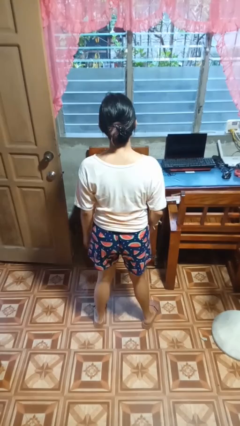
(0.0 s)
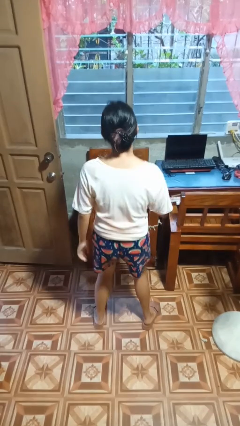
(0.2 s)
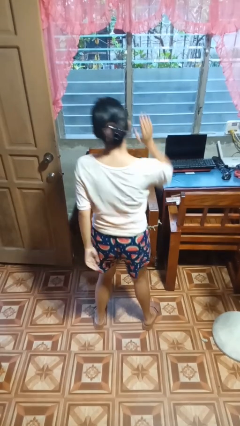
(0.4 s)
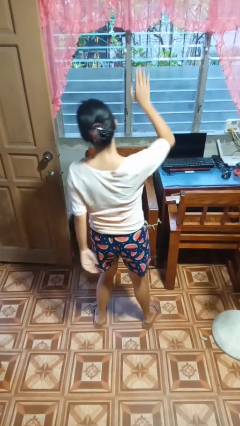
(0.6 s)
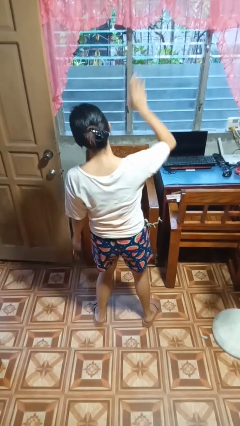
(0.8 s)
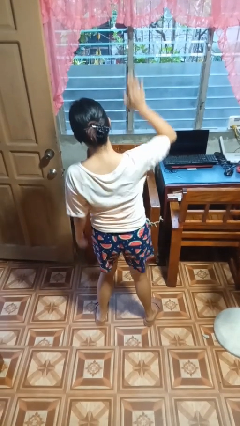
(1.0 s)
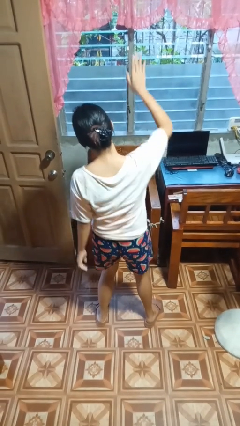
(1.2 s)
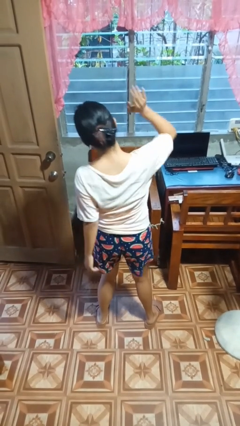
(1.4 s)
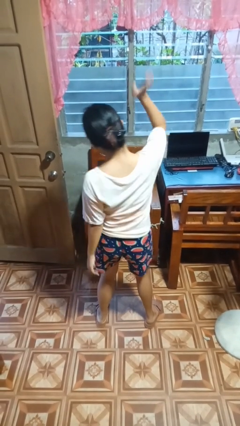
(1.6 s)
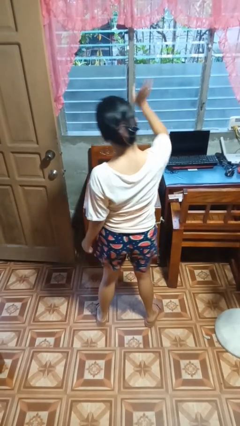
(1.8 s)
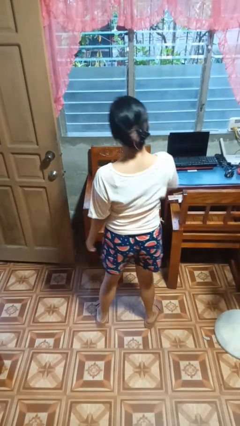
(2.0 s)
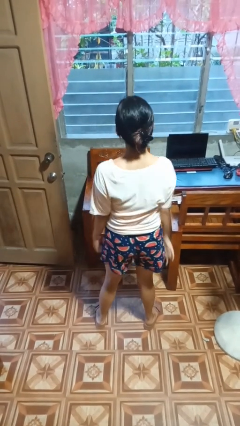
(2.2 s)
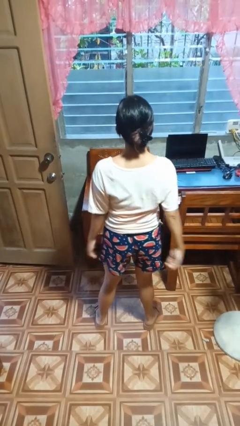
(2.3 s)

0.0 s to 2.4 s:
person dances in place

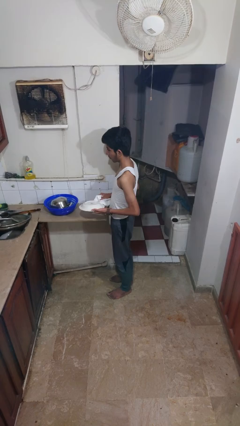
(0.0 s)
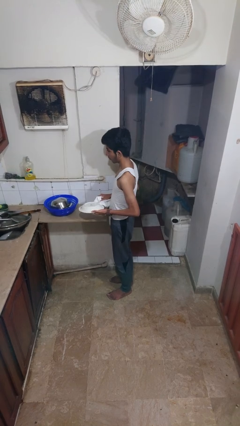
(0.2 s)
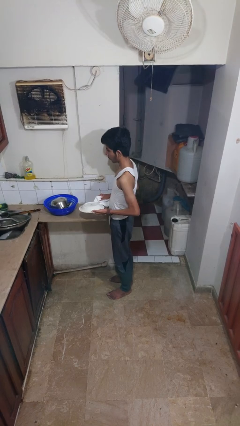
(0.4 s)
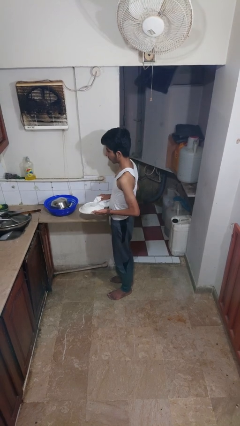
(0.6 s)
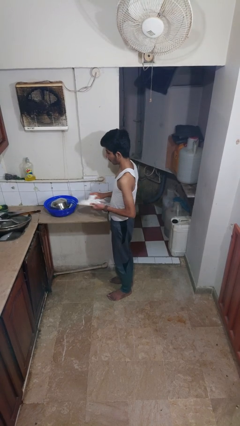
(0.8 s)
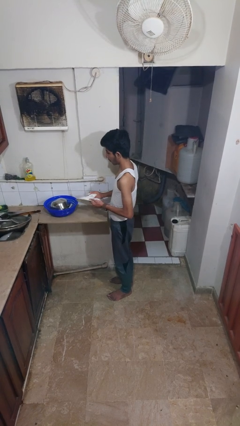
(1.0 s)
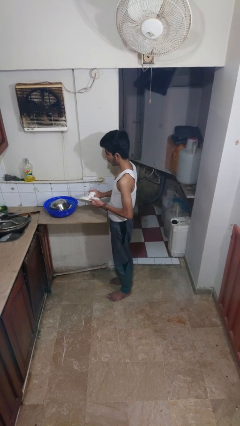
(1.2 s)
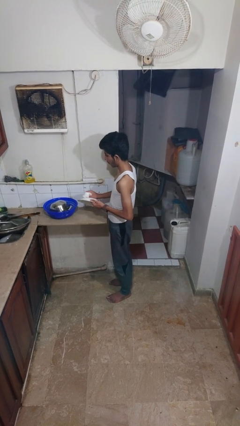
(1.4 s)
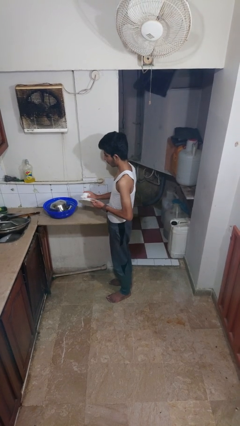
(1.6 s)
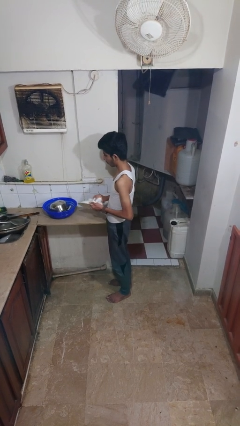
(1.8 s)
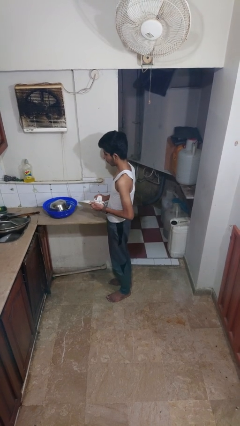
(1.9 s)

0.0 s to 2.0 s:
person dries dish

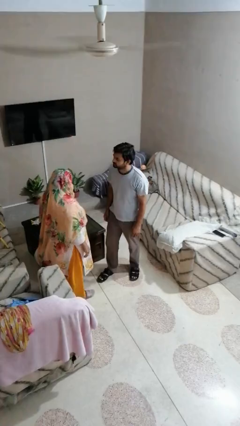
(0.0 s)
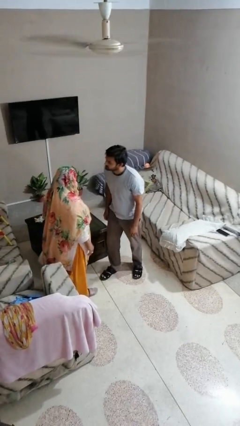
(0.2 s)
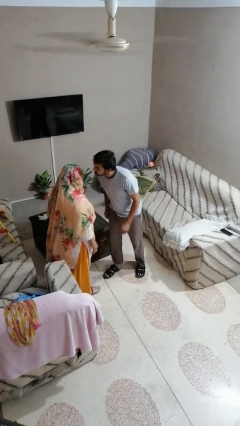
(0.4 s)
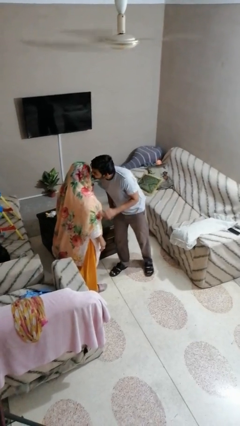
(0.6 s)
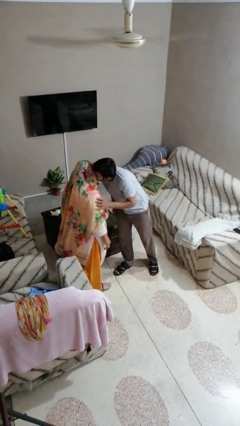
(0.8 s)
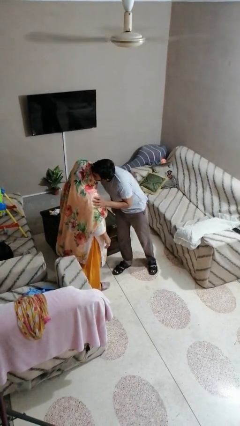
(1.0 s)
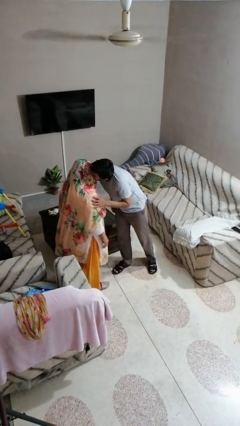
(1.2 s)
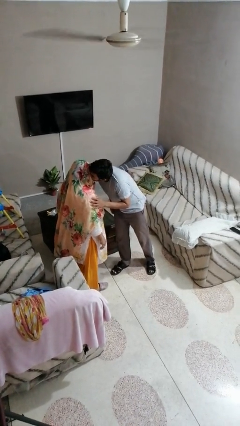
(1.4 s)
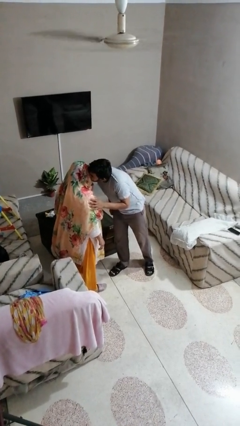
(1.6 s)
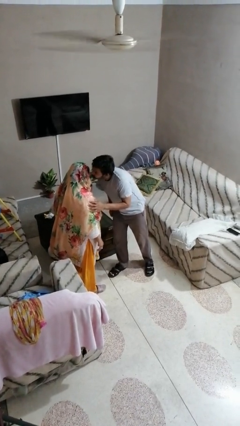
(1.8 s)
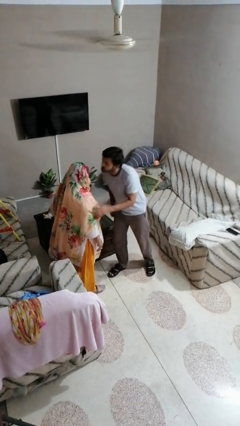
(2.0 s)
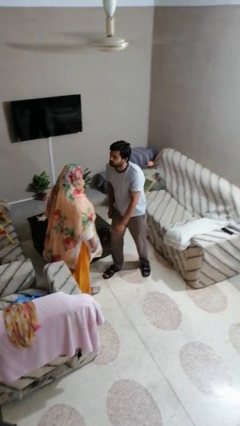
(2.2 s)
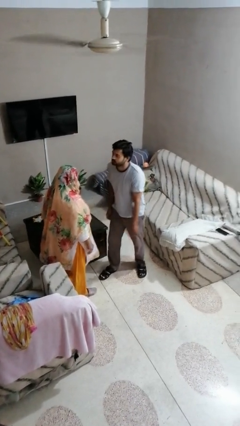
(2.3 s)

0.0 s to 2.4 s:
person kisses cheek of person

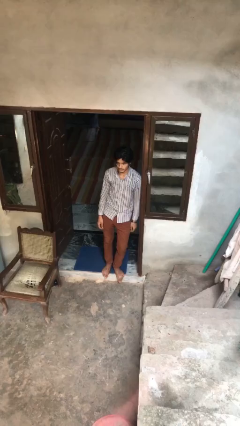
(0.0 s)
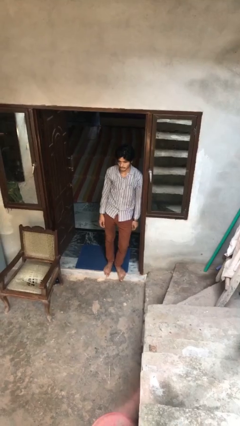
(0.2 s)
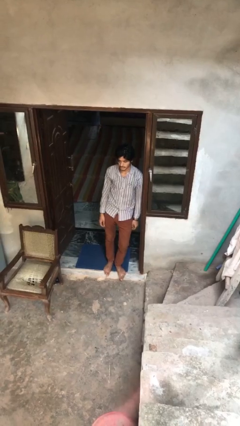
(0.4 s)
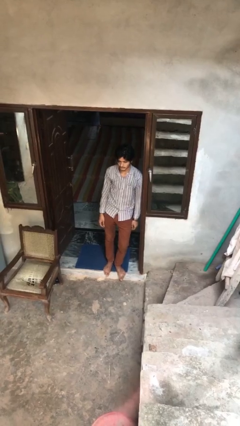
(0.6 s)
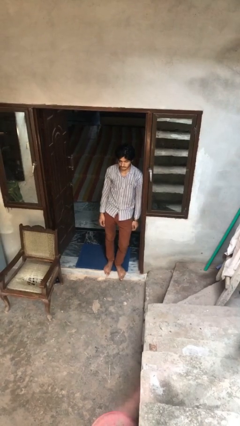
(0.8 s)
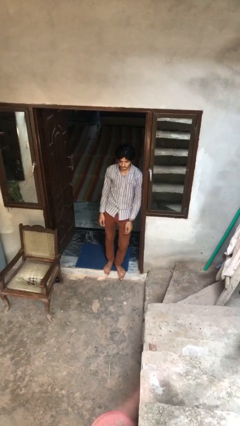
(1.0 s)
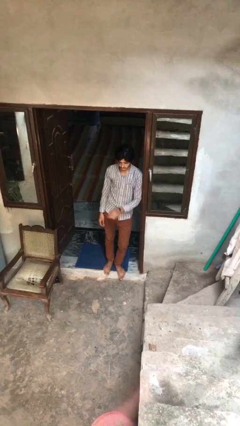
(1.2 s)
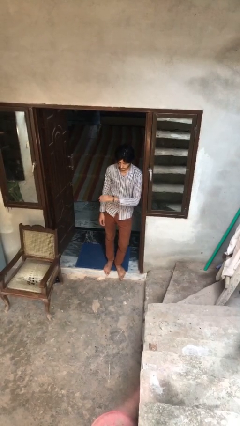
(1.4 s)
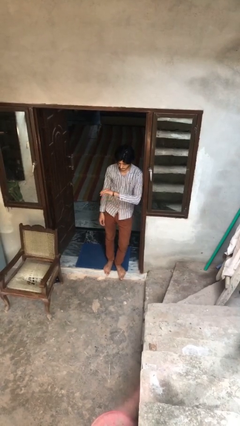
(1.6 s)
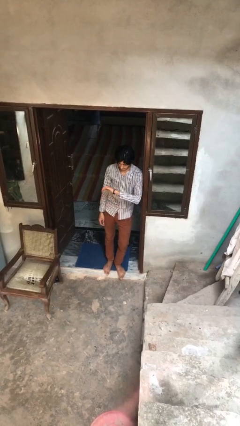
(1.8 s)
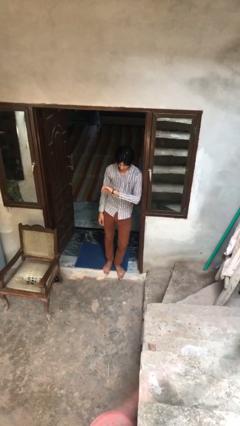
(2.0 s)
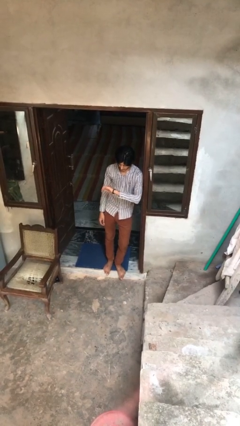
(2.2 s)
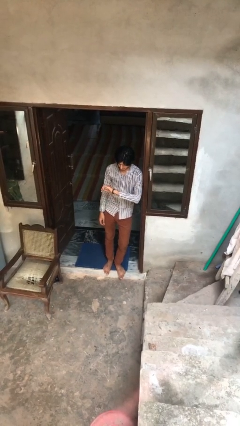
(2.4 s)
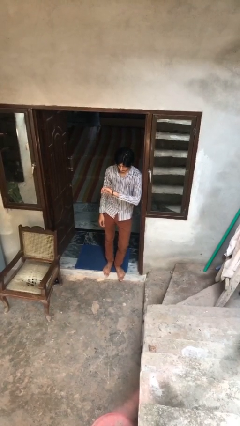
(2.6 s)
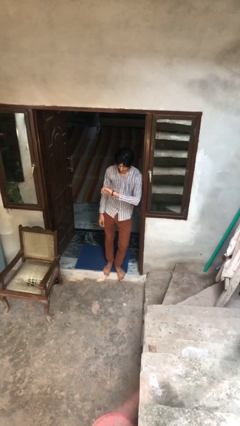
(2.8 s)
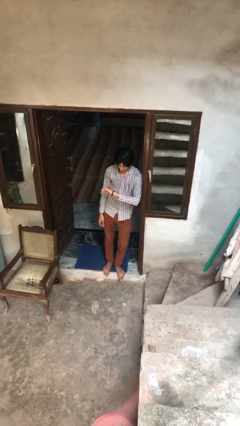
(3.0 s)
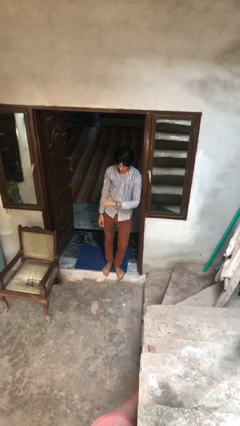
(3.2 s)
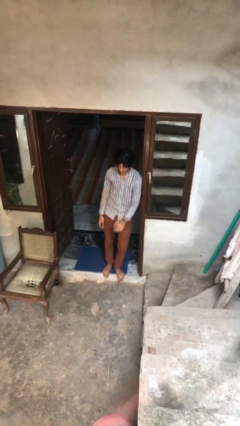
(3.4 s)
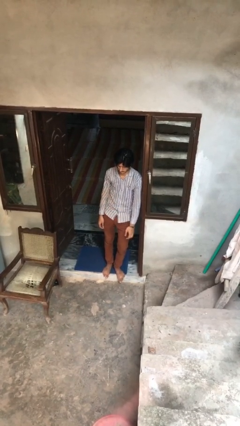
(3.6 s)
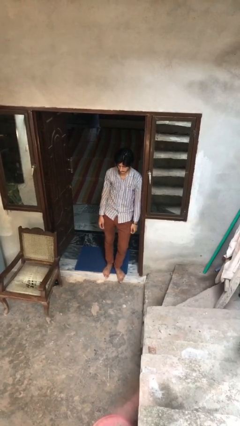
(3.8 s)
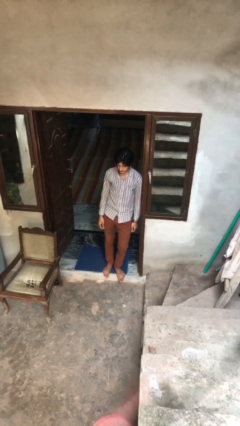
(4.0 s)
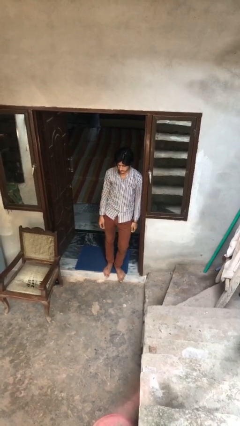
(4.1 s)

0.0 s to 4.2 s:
person looks at wristwatch

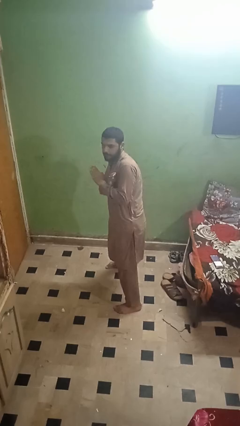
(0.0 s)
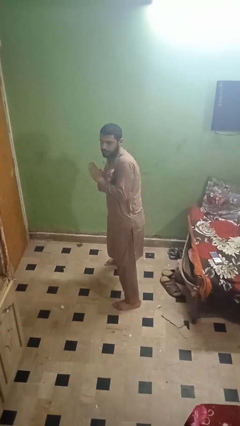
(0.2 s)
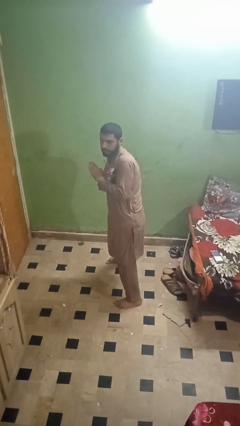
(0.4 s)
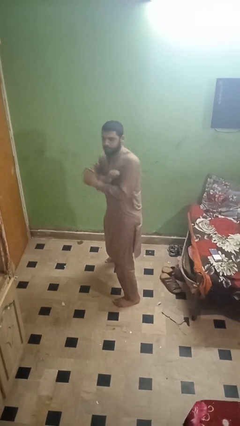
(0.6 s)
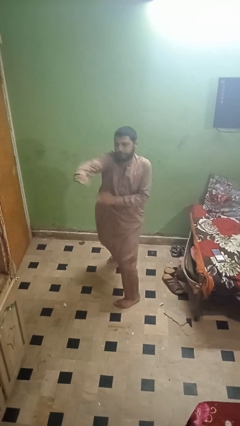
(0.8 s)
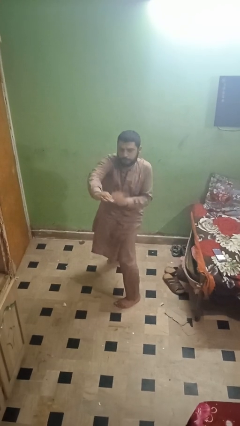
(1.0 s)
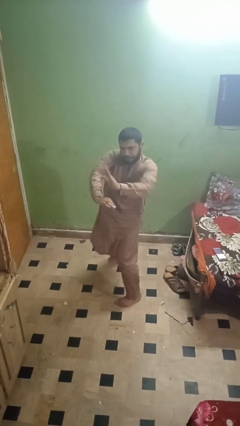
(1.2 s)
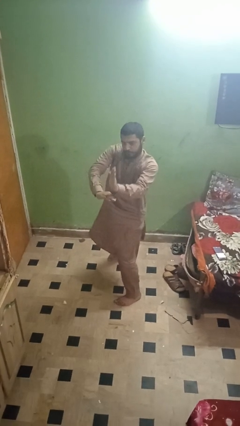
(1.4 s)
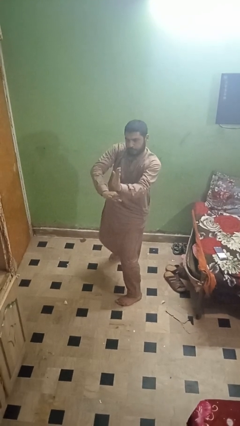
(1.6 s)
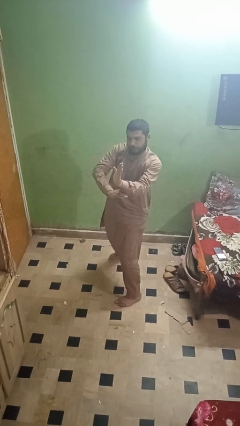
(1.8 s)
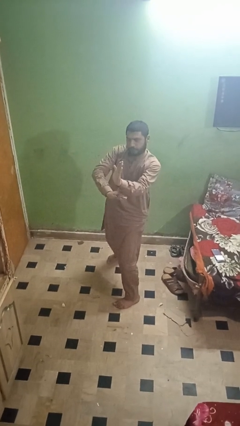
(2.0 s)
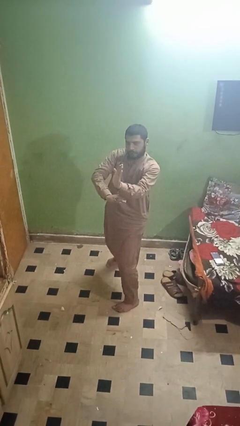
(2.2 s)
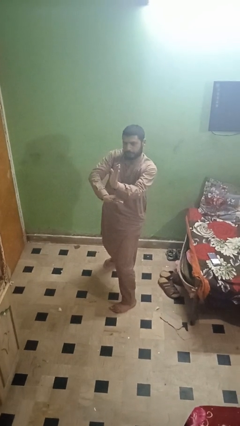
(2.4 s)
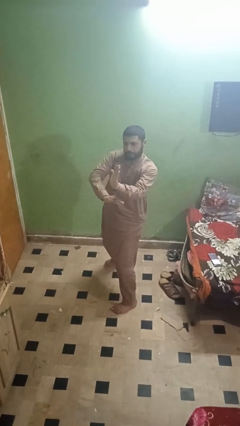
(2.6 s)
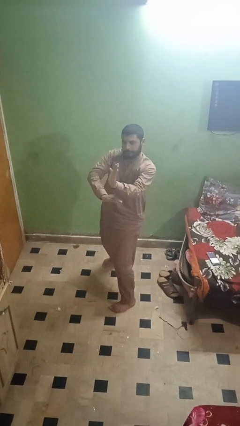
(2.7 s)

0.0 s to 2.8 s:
person karate chop

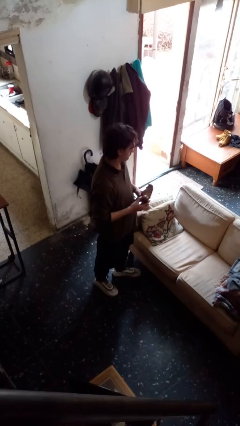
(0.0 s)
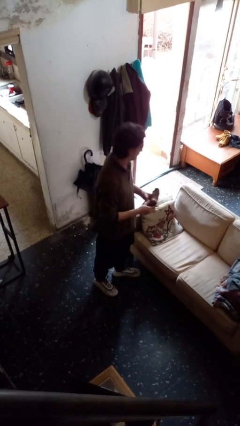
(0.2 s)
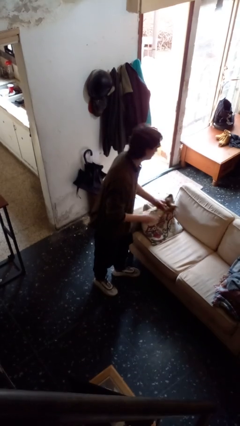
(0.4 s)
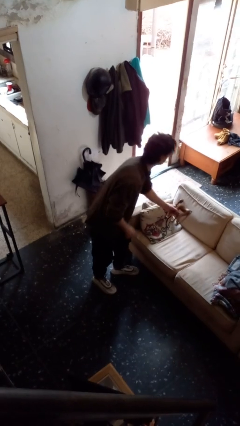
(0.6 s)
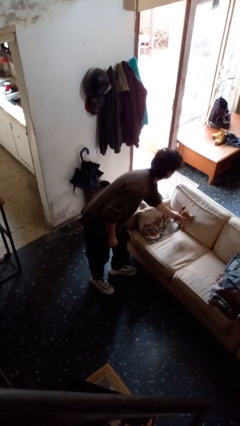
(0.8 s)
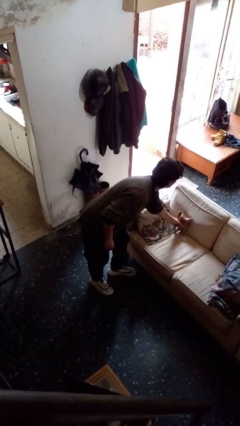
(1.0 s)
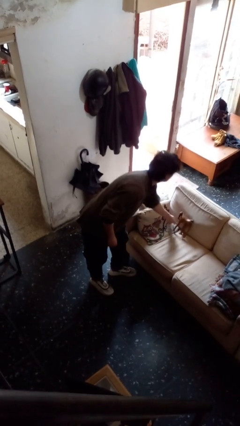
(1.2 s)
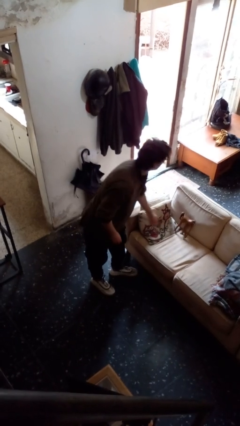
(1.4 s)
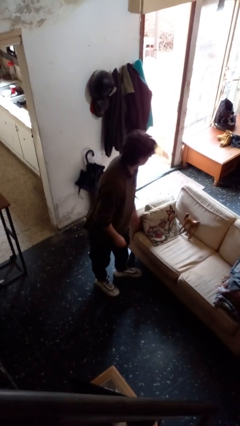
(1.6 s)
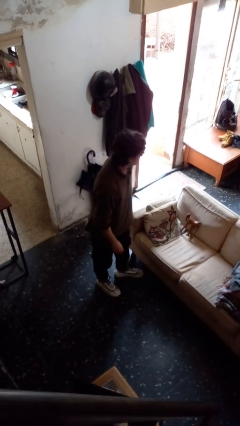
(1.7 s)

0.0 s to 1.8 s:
person puts down object on couch

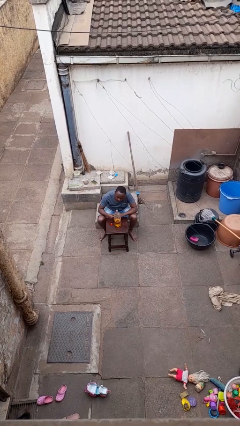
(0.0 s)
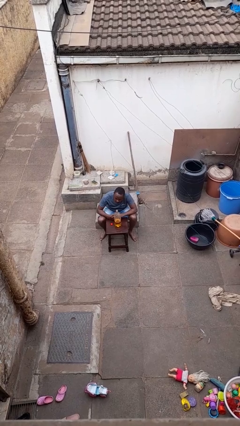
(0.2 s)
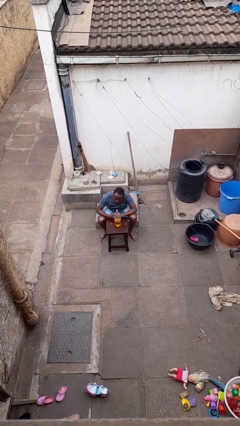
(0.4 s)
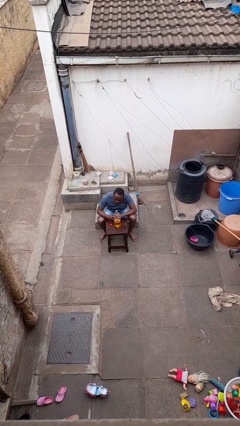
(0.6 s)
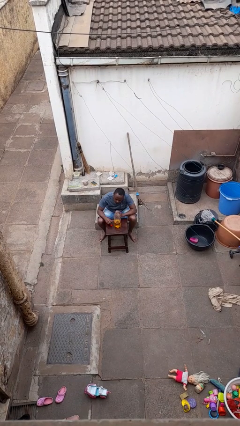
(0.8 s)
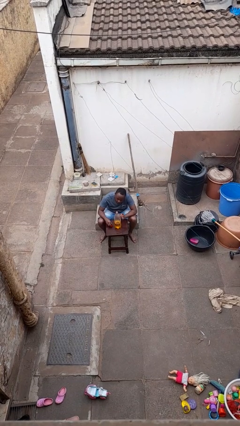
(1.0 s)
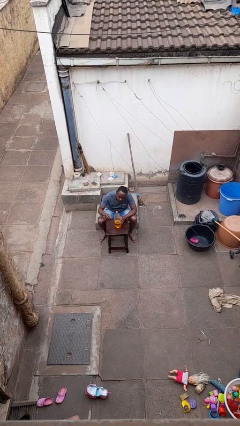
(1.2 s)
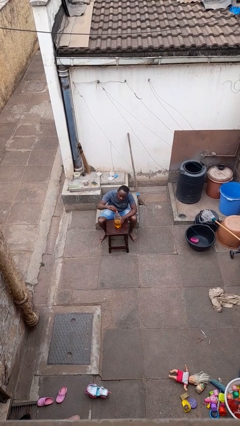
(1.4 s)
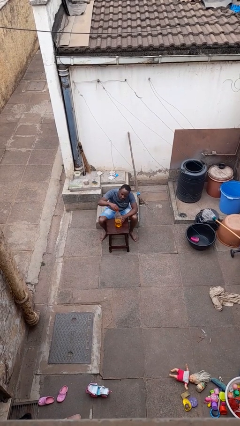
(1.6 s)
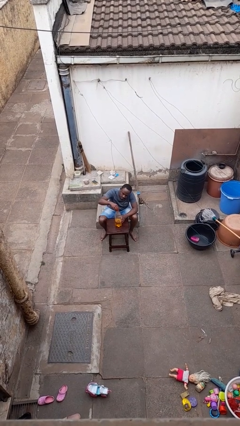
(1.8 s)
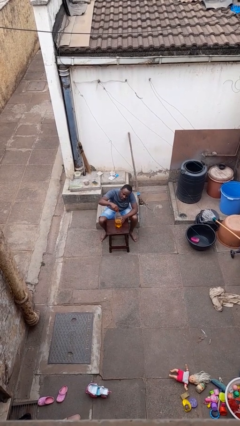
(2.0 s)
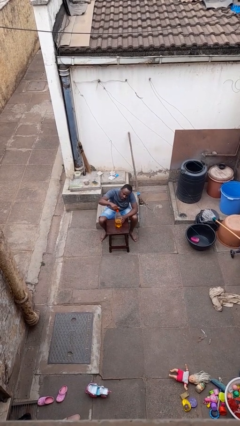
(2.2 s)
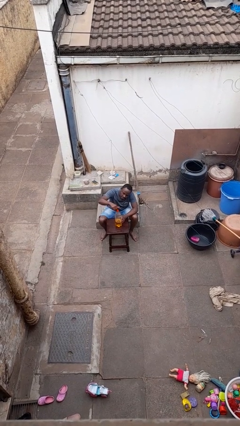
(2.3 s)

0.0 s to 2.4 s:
person screws lid to bottle
